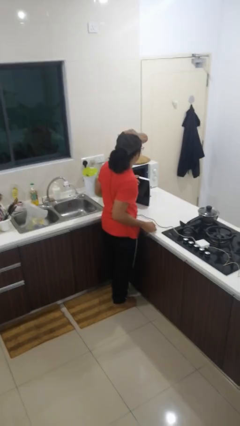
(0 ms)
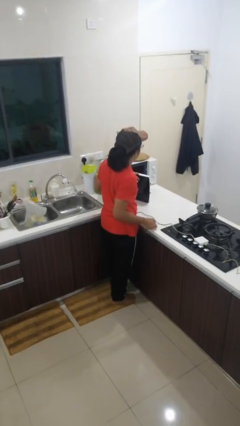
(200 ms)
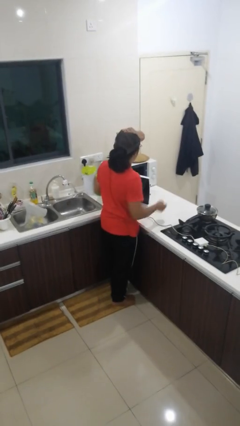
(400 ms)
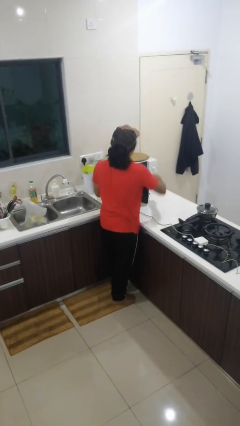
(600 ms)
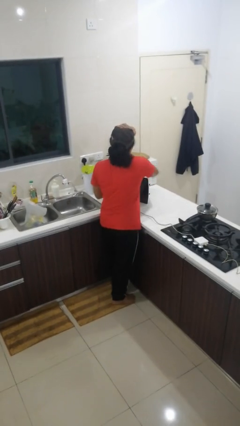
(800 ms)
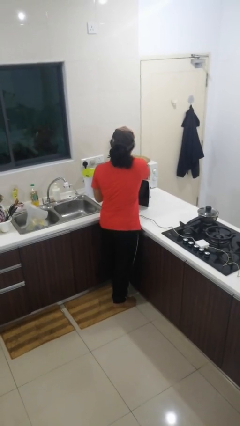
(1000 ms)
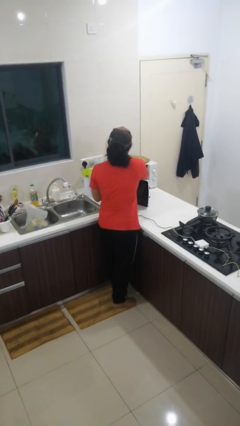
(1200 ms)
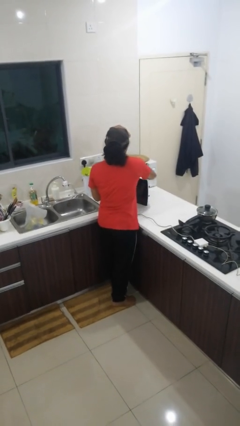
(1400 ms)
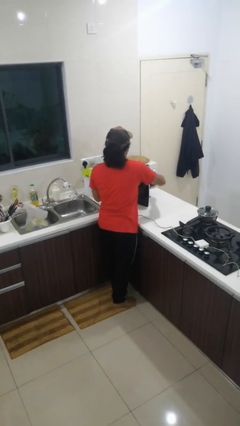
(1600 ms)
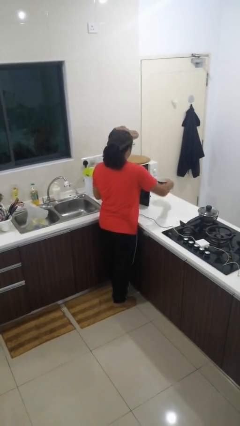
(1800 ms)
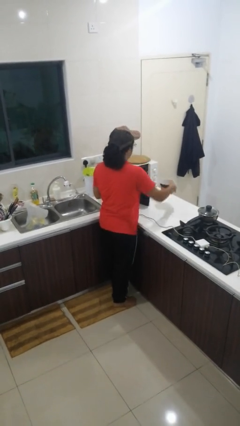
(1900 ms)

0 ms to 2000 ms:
person takes object from microwave

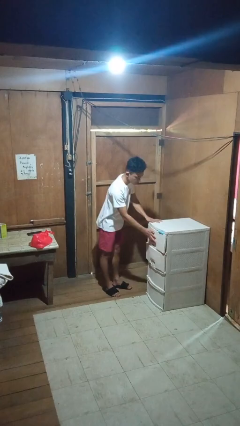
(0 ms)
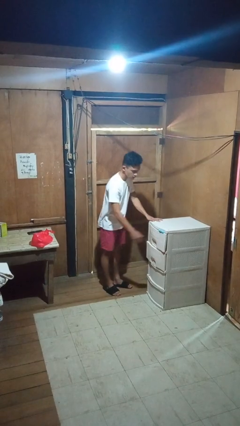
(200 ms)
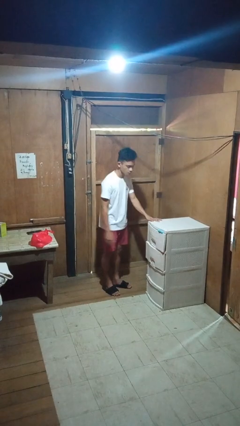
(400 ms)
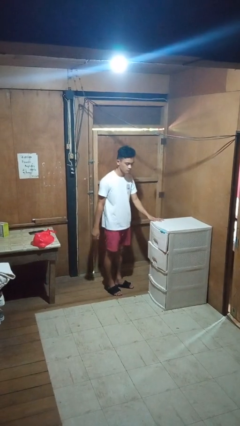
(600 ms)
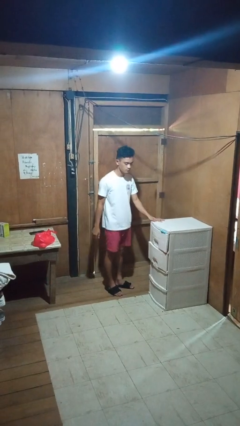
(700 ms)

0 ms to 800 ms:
person closes dresser drawer

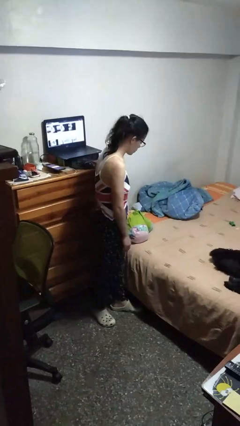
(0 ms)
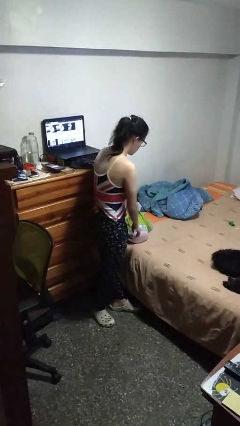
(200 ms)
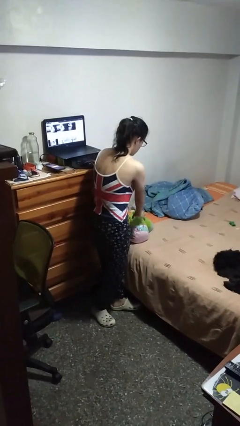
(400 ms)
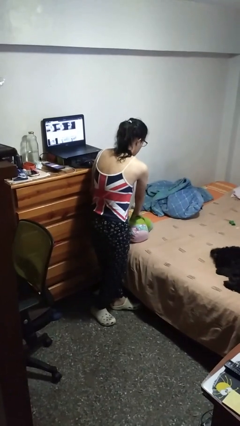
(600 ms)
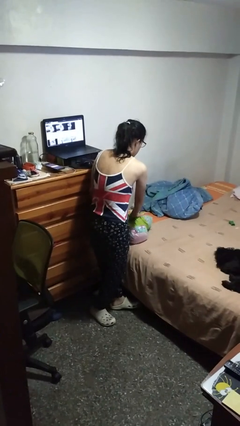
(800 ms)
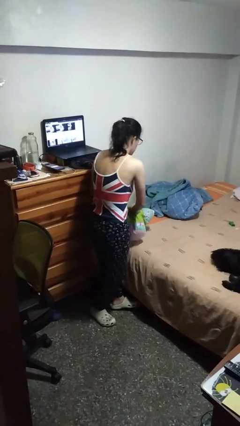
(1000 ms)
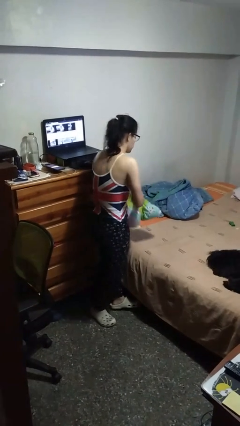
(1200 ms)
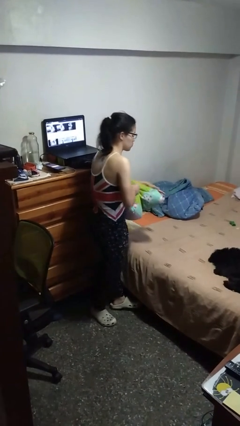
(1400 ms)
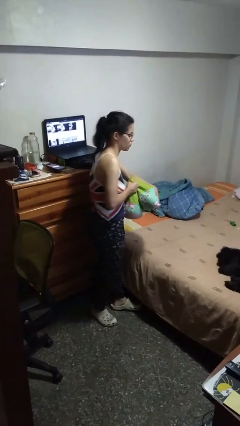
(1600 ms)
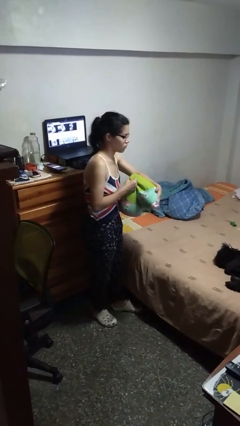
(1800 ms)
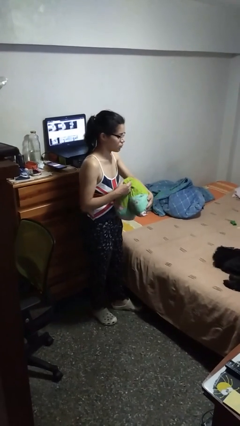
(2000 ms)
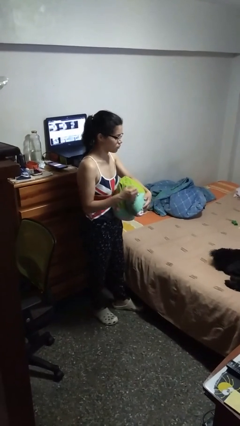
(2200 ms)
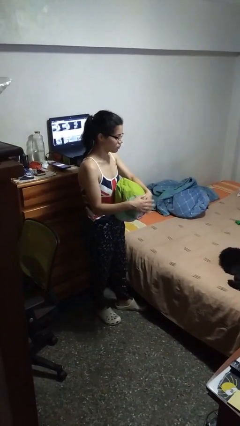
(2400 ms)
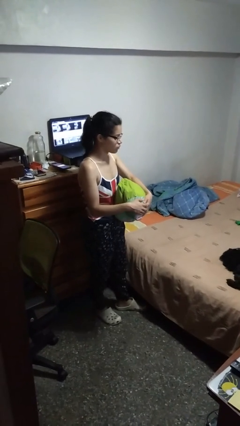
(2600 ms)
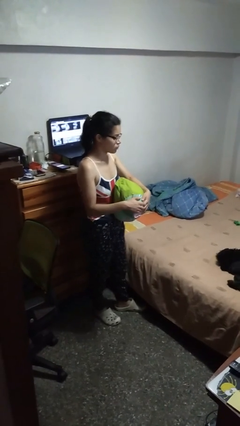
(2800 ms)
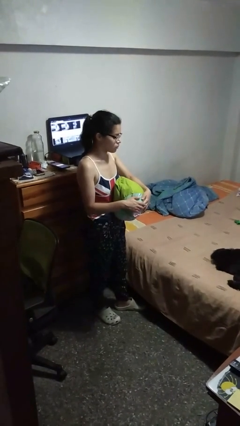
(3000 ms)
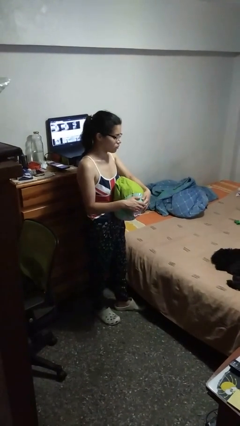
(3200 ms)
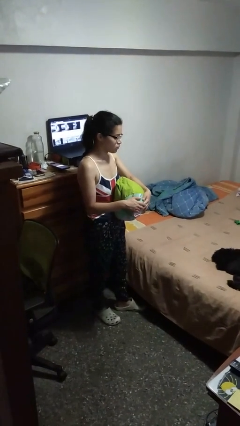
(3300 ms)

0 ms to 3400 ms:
person picks up object from bed

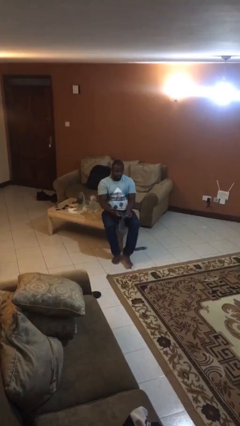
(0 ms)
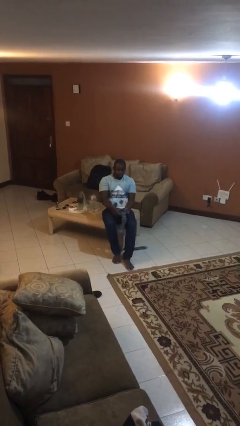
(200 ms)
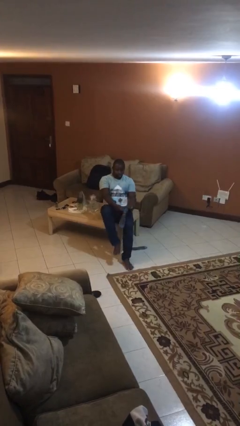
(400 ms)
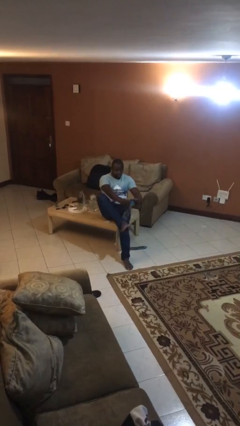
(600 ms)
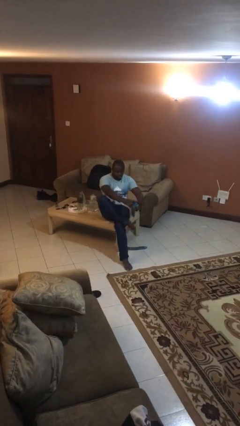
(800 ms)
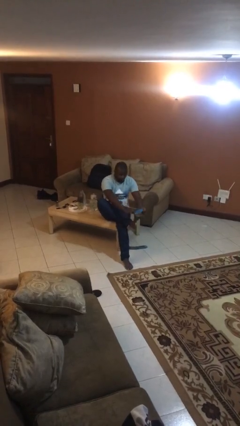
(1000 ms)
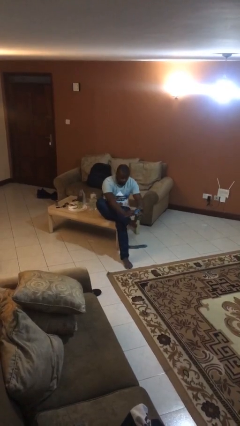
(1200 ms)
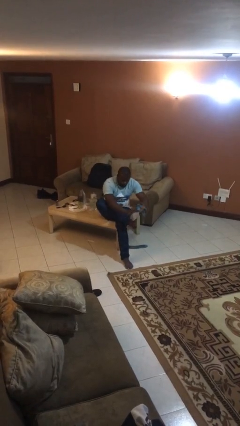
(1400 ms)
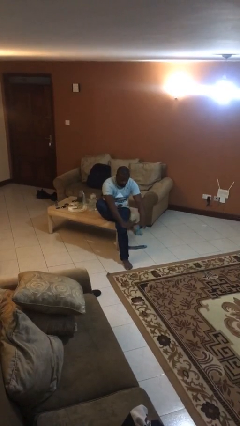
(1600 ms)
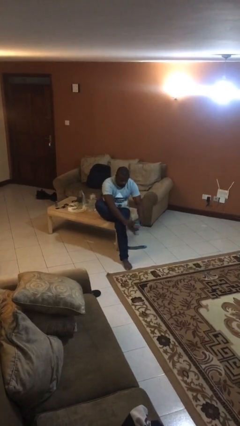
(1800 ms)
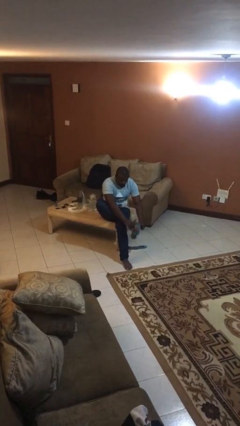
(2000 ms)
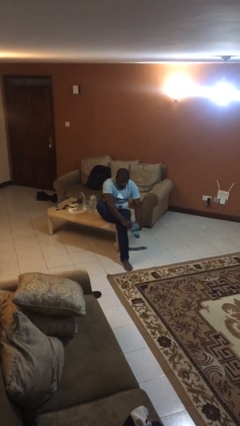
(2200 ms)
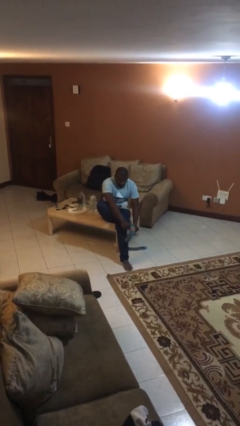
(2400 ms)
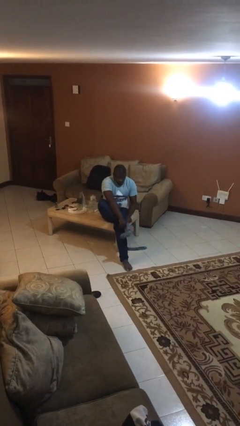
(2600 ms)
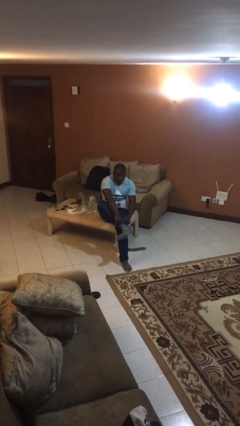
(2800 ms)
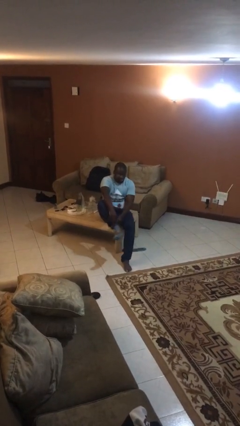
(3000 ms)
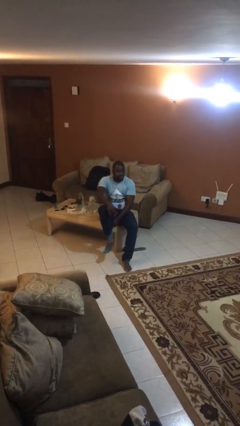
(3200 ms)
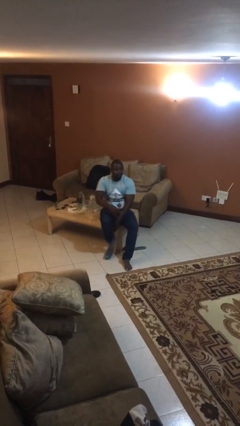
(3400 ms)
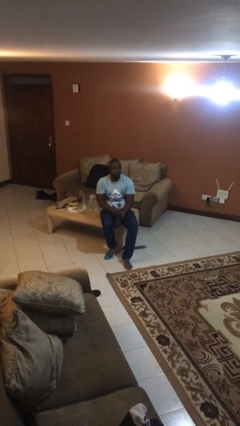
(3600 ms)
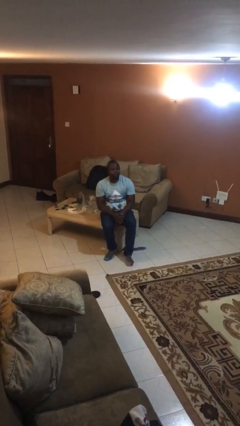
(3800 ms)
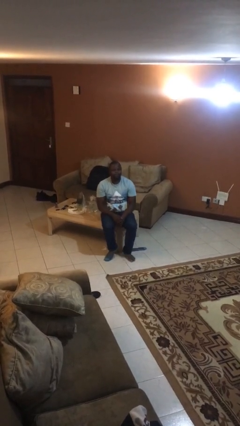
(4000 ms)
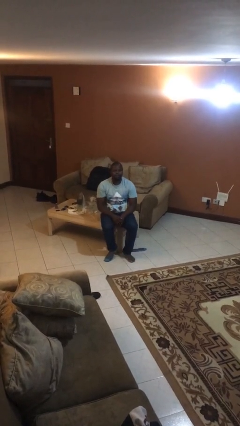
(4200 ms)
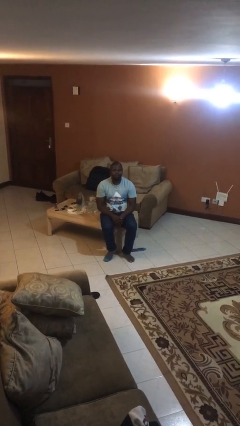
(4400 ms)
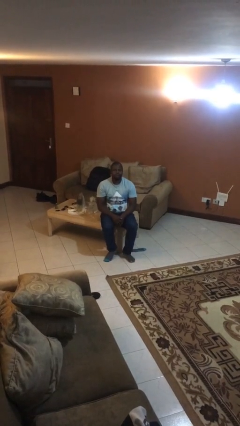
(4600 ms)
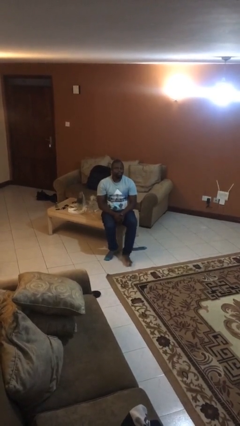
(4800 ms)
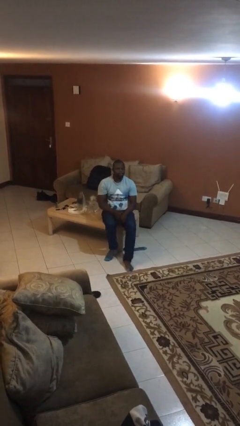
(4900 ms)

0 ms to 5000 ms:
person puts on socks

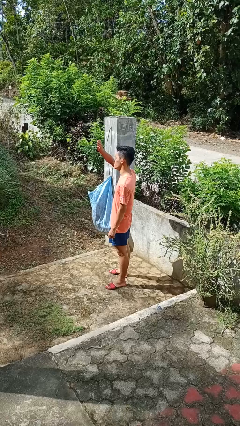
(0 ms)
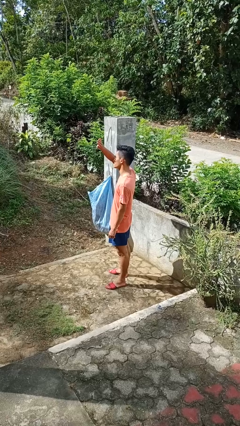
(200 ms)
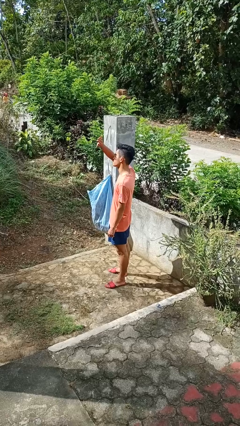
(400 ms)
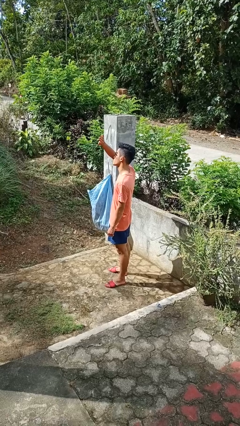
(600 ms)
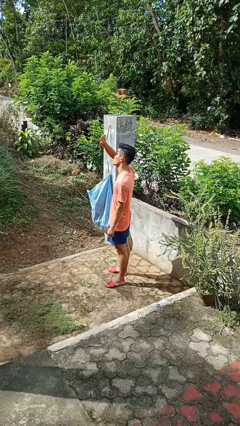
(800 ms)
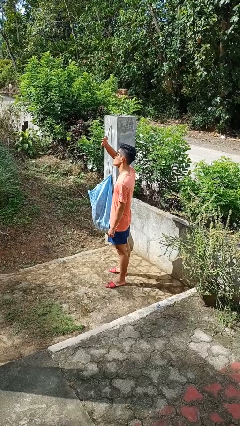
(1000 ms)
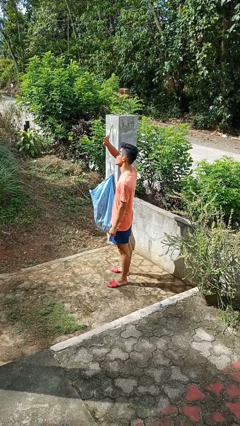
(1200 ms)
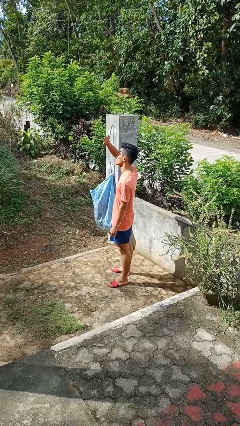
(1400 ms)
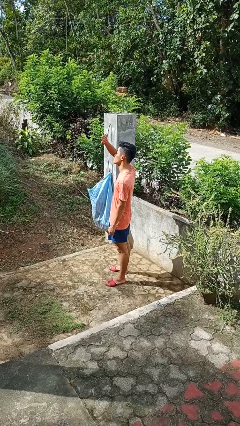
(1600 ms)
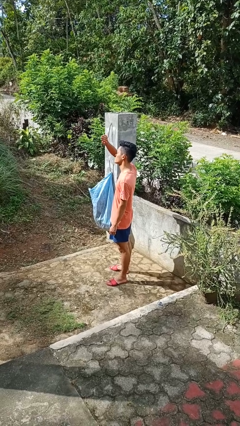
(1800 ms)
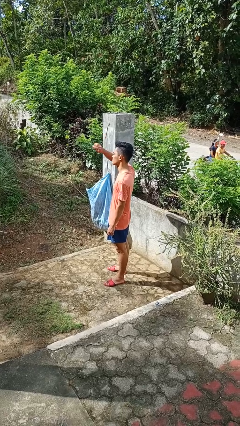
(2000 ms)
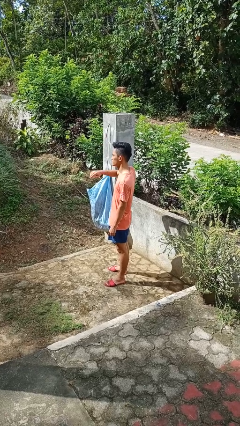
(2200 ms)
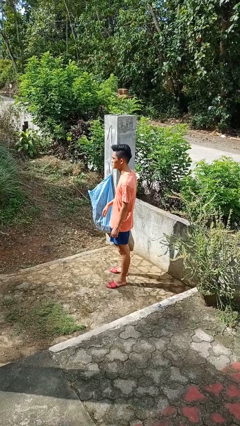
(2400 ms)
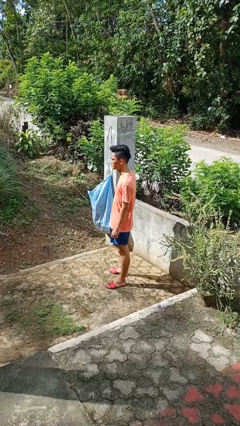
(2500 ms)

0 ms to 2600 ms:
person shades eyes

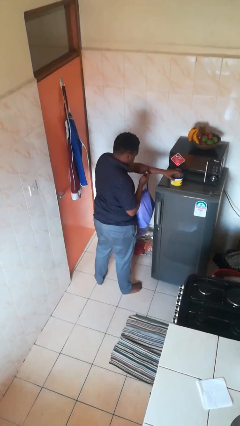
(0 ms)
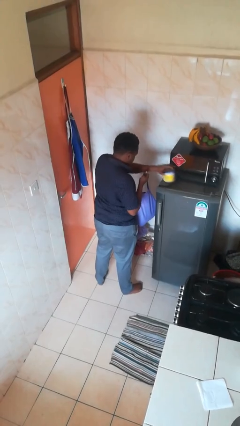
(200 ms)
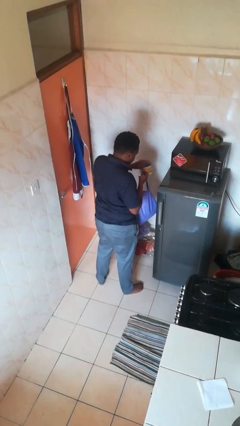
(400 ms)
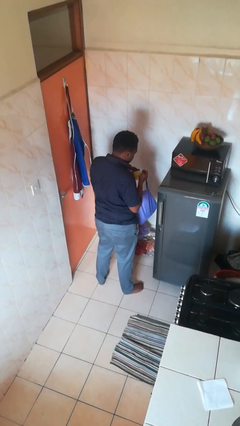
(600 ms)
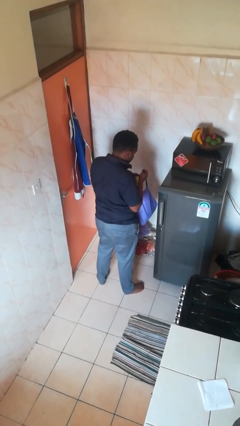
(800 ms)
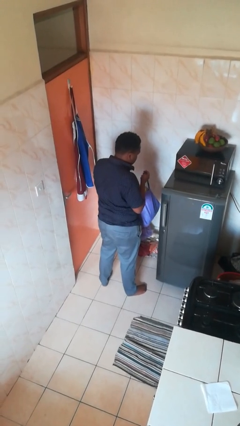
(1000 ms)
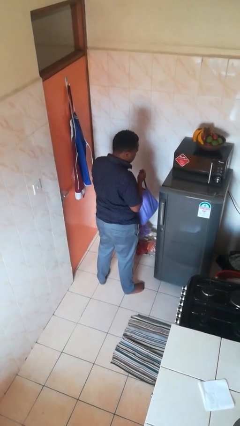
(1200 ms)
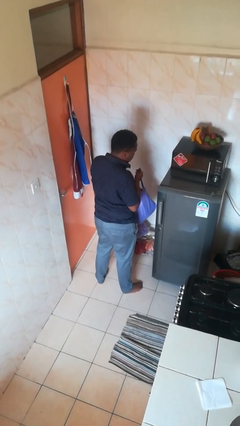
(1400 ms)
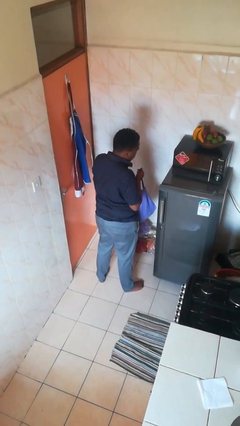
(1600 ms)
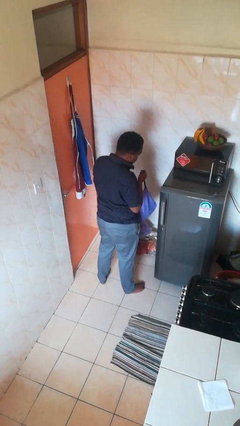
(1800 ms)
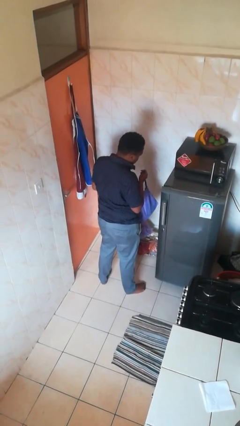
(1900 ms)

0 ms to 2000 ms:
person puts object into bag

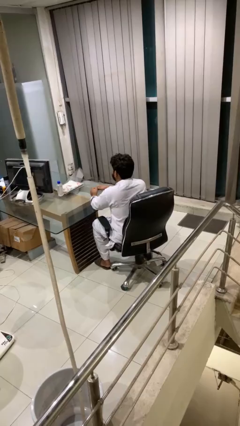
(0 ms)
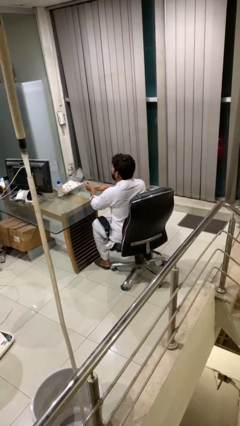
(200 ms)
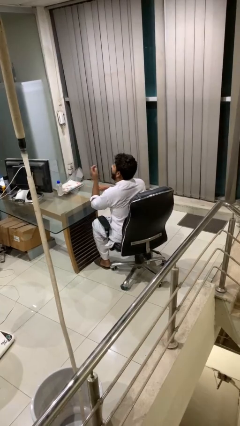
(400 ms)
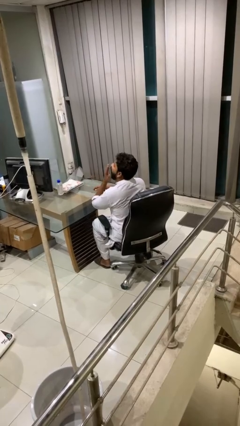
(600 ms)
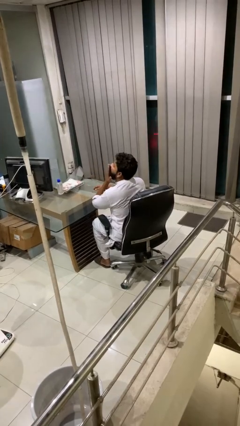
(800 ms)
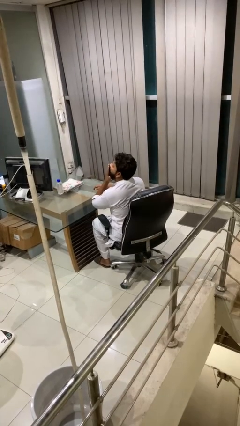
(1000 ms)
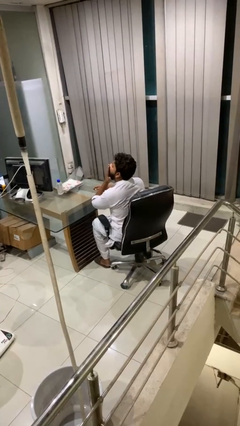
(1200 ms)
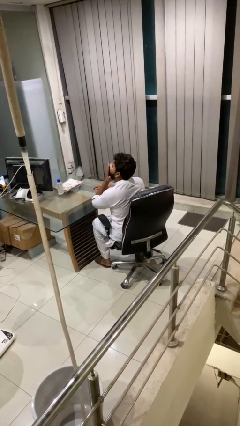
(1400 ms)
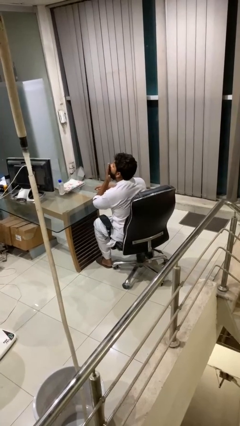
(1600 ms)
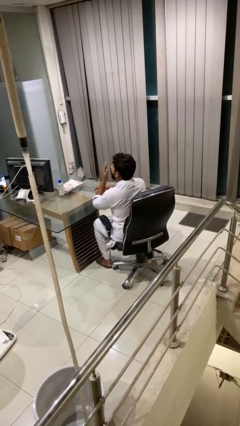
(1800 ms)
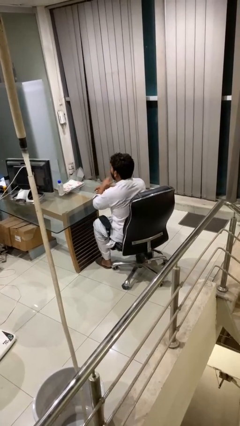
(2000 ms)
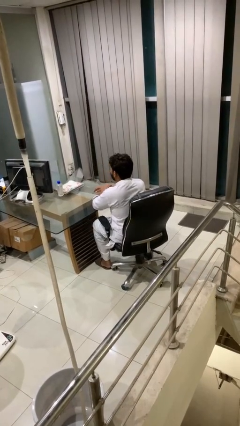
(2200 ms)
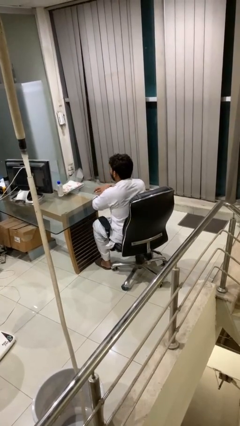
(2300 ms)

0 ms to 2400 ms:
person yawns
